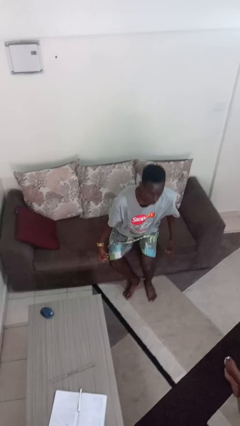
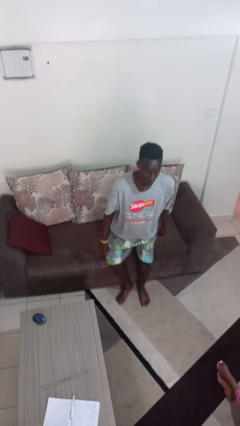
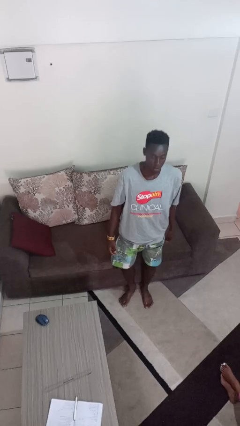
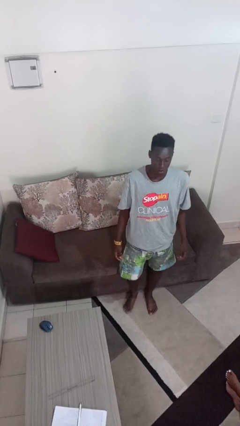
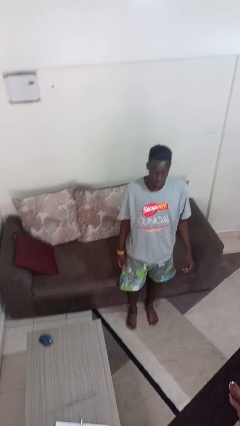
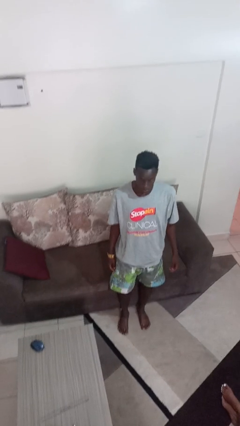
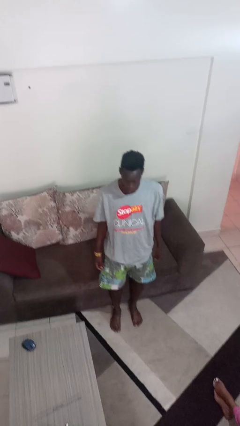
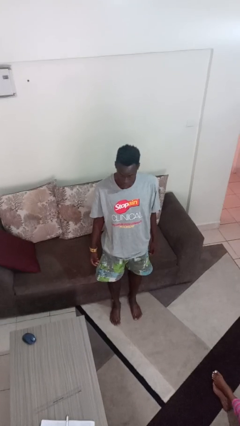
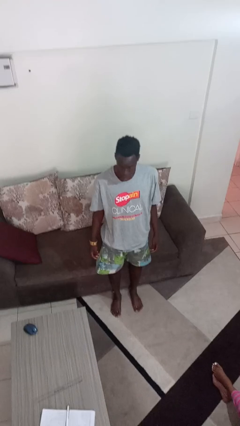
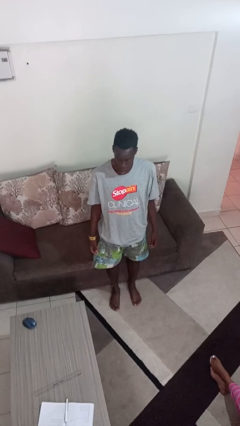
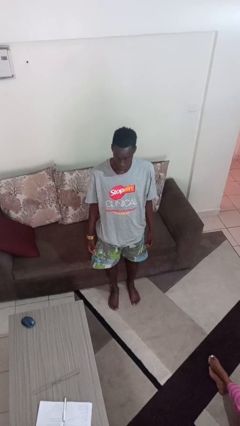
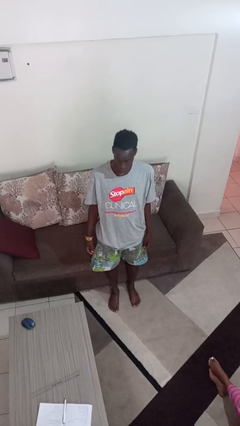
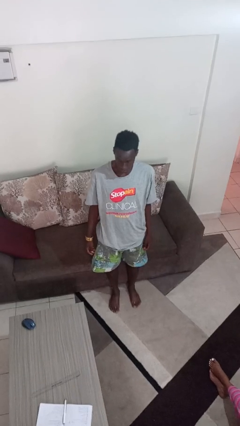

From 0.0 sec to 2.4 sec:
person stands up

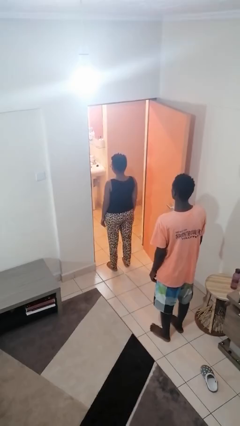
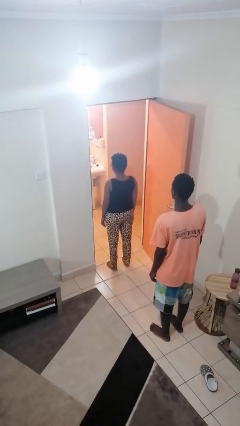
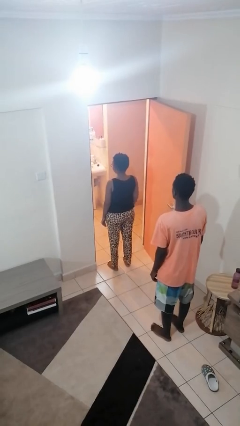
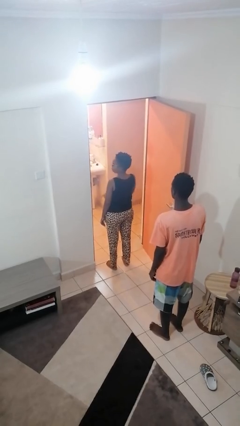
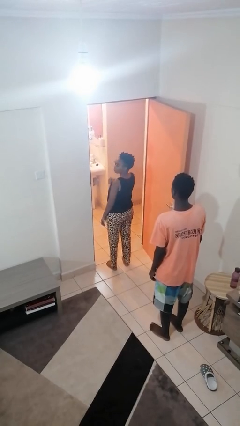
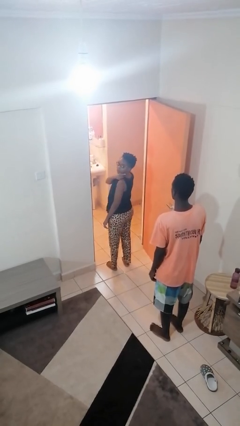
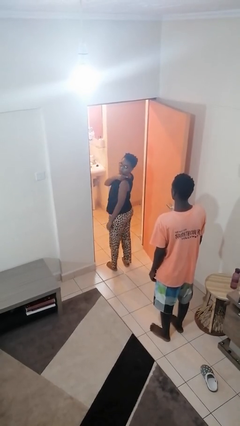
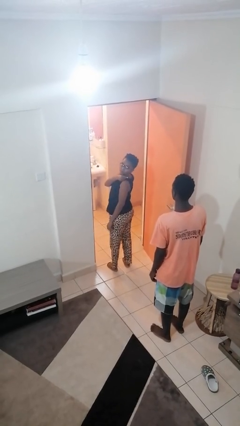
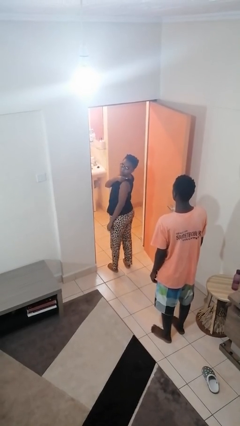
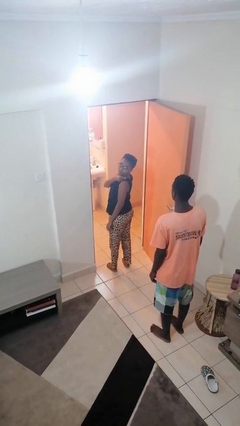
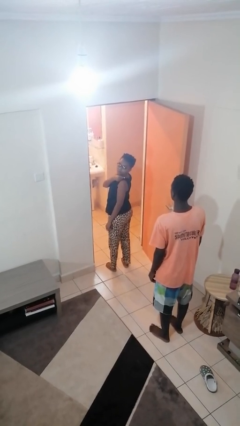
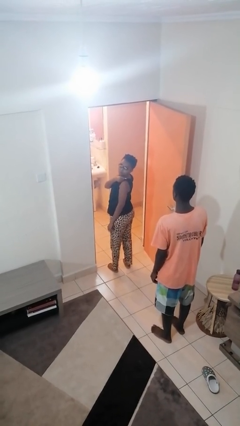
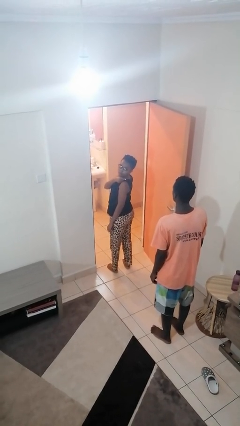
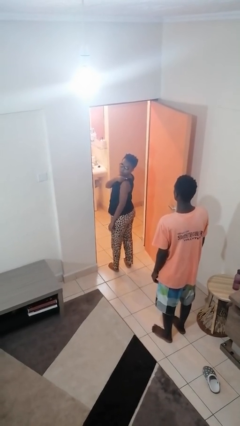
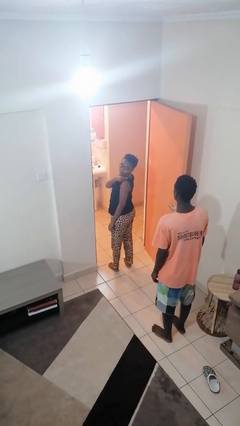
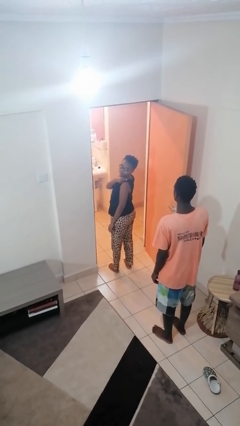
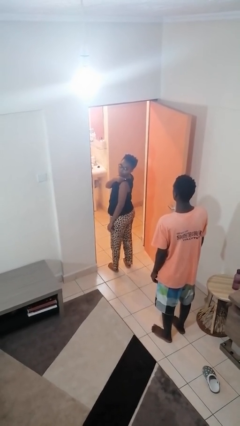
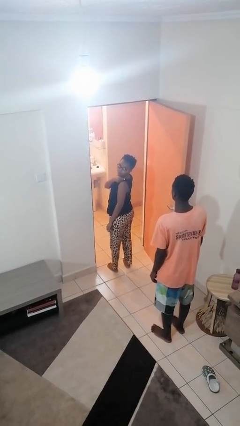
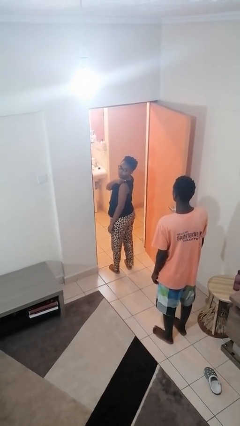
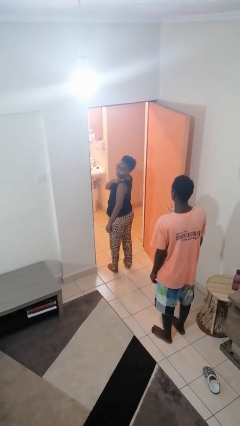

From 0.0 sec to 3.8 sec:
person looks over shoulder

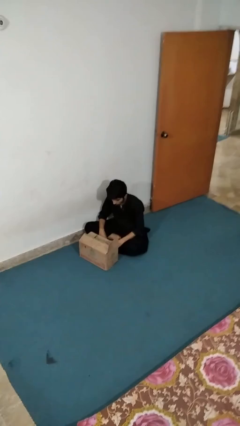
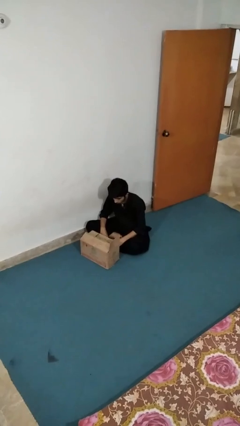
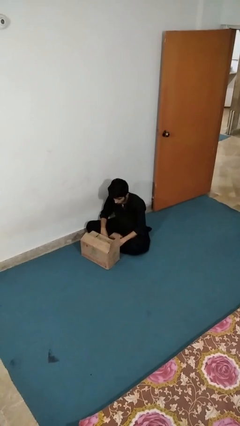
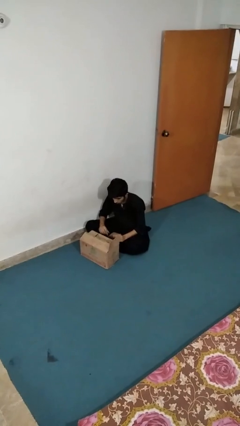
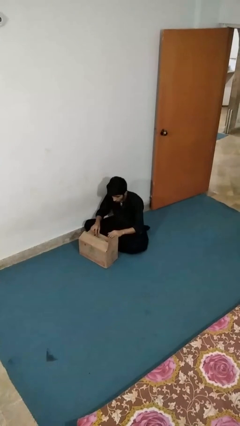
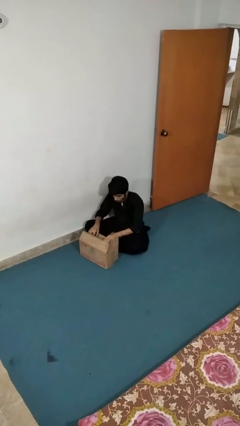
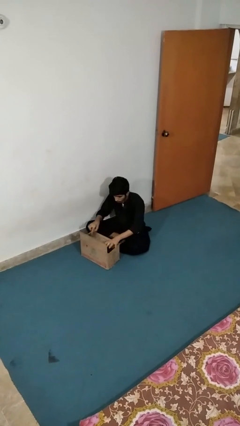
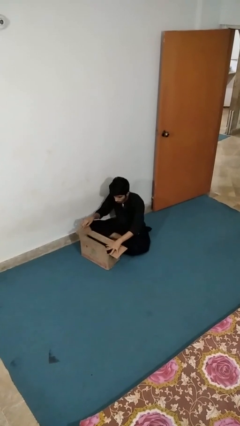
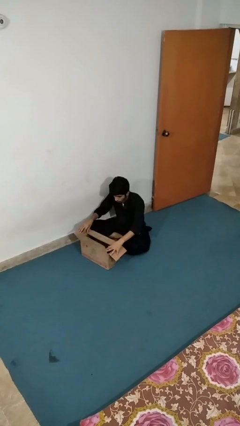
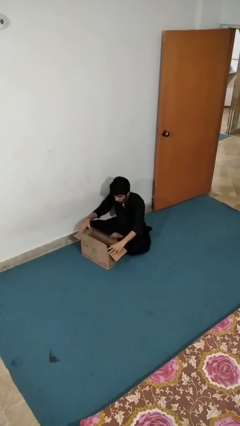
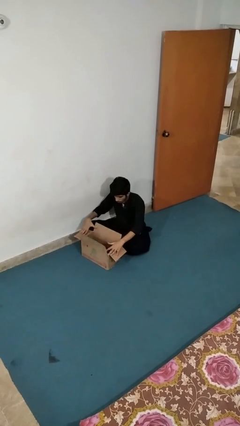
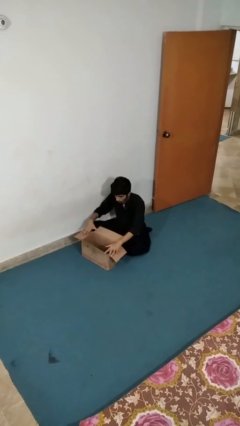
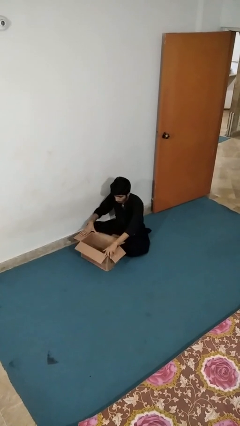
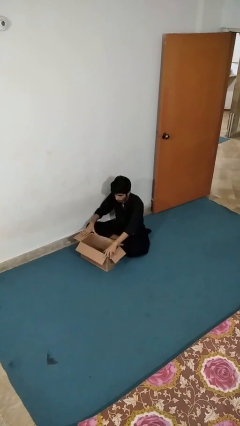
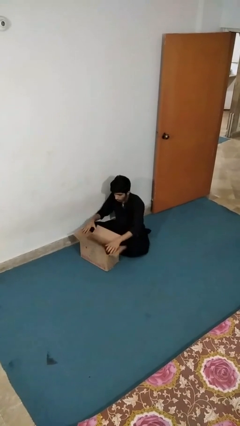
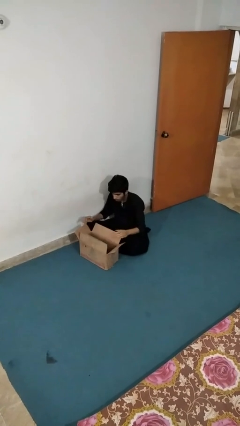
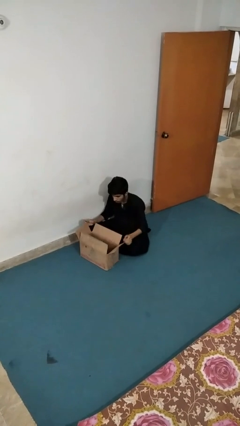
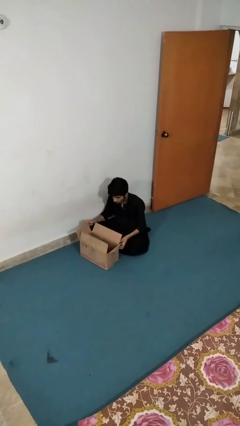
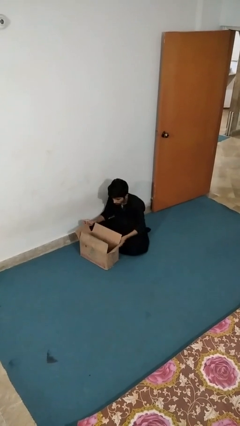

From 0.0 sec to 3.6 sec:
person opens box

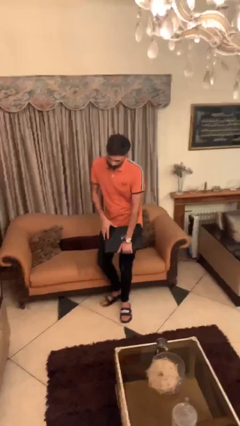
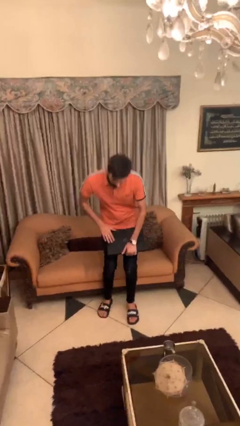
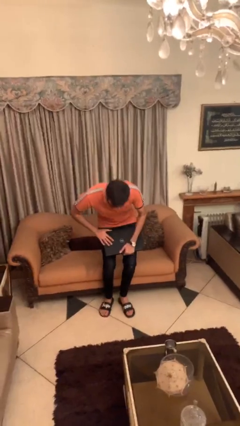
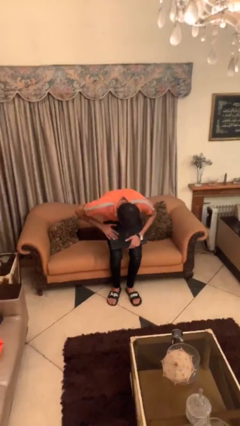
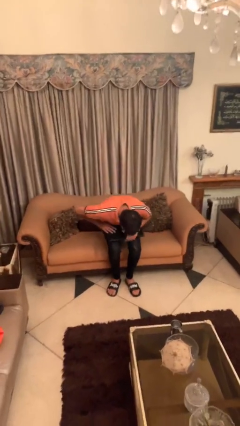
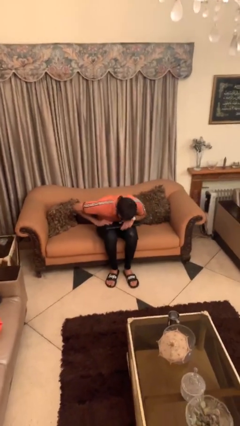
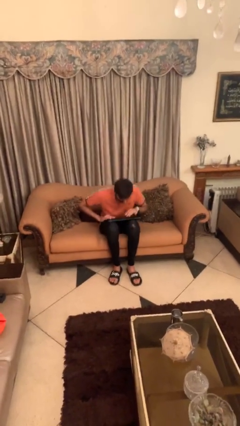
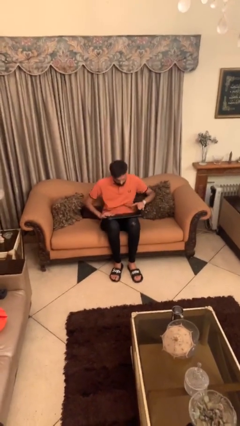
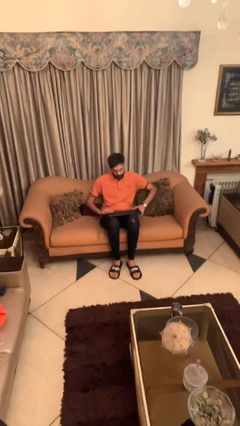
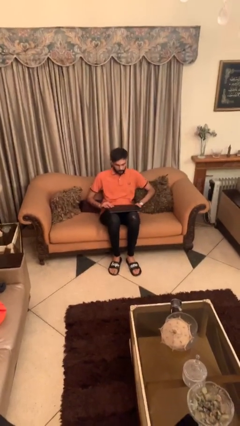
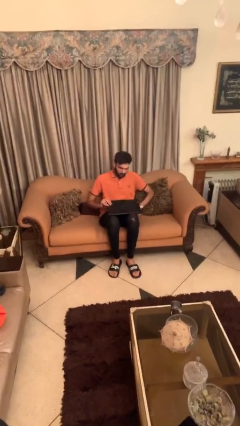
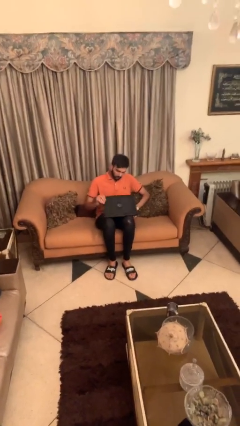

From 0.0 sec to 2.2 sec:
person sits down

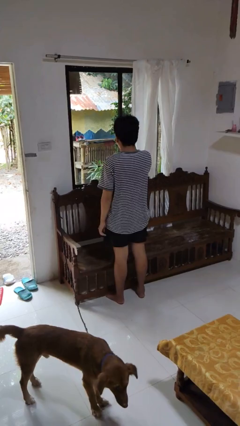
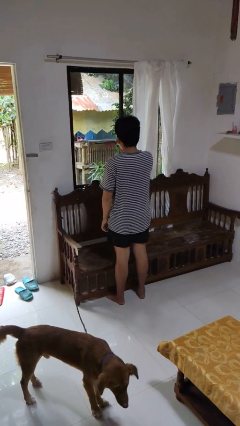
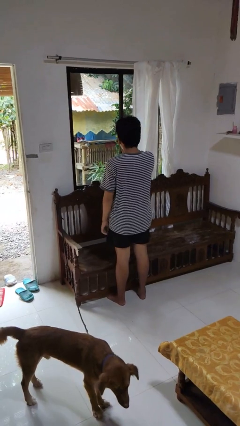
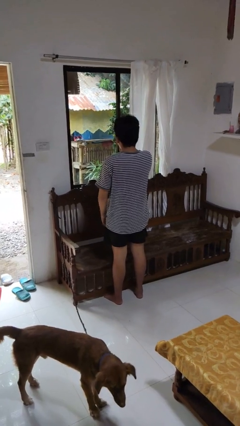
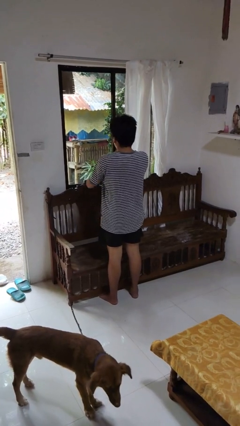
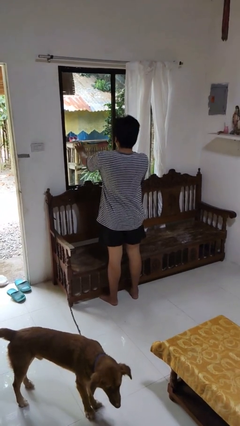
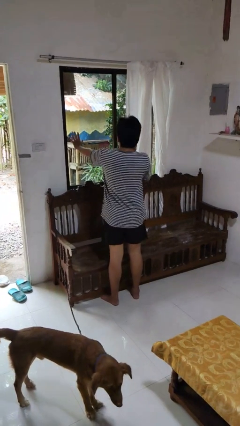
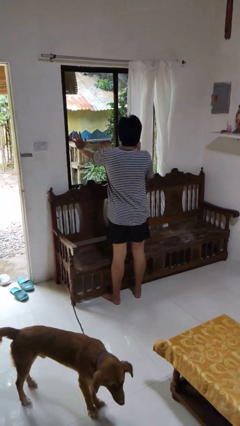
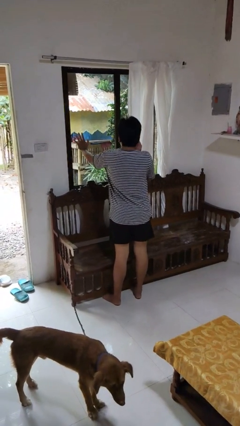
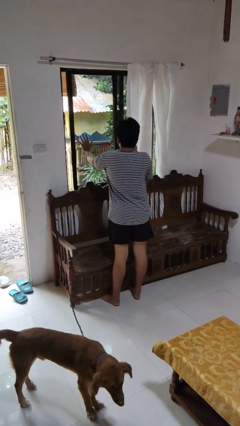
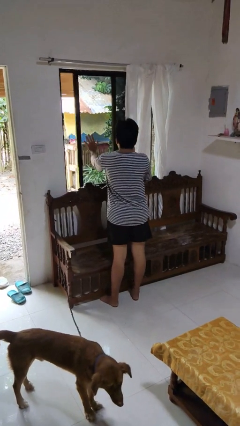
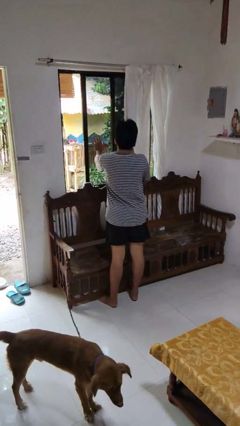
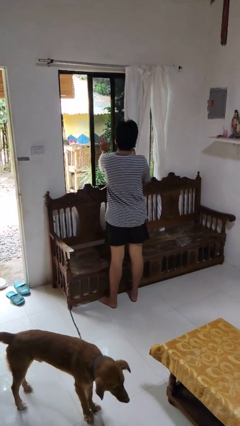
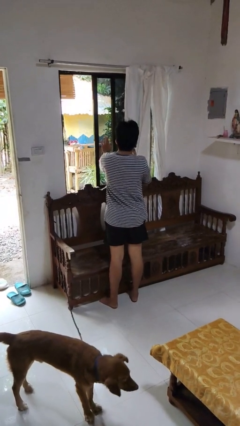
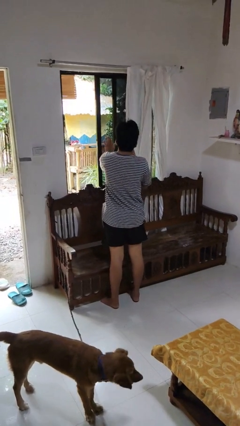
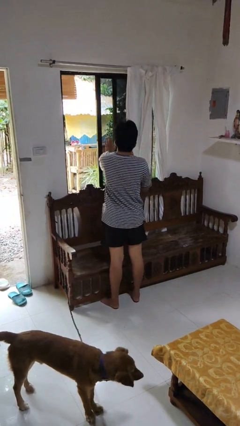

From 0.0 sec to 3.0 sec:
person opens home window

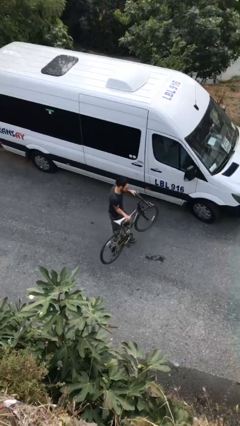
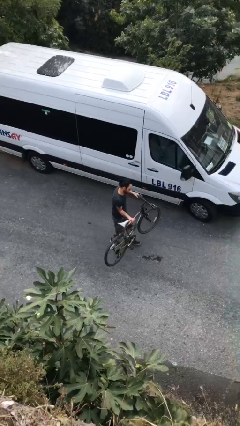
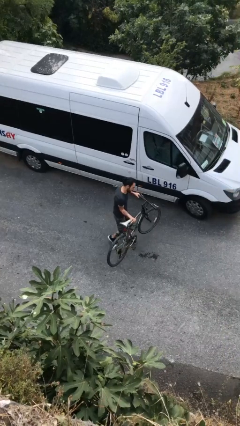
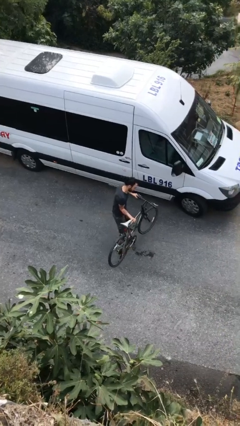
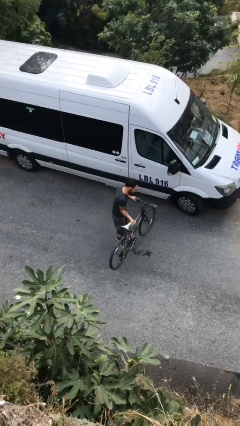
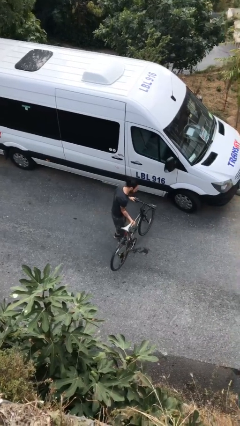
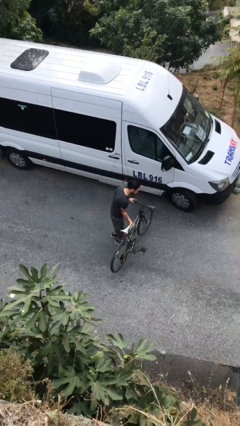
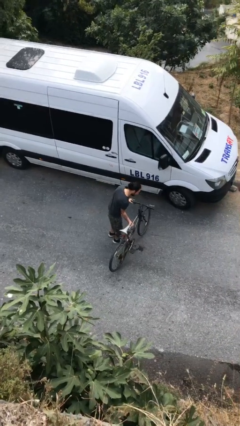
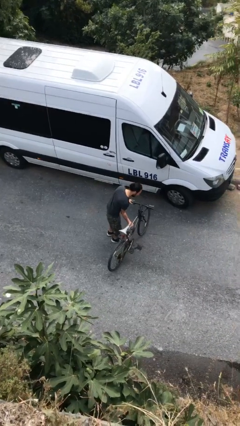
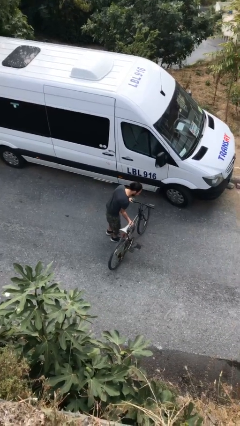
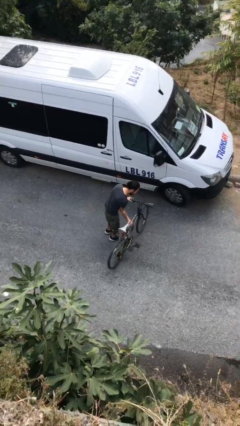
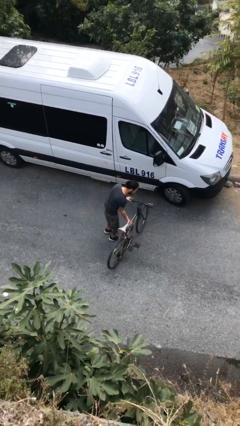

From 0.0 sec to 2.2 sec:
person puts down object on floor
